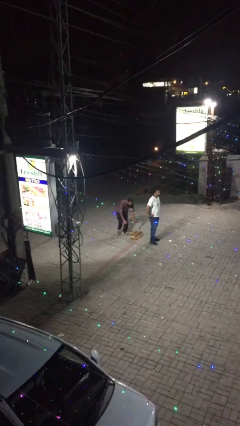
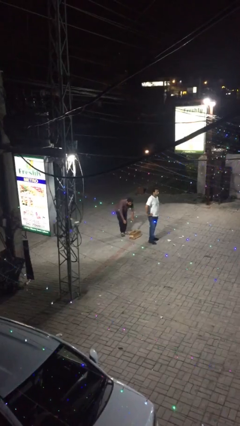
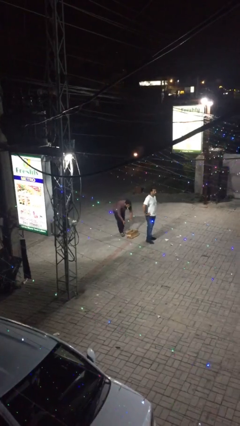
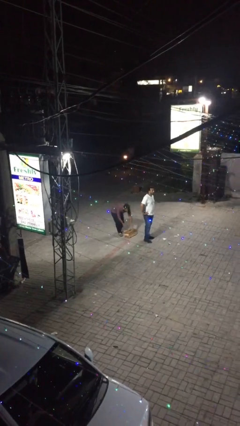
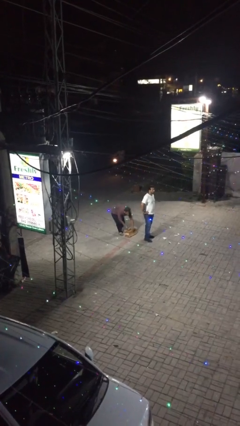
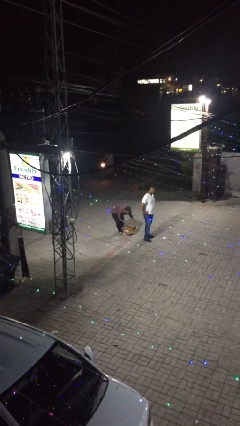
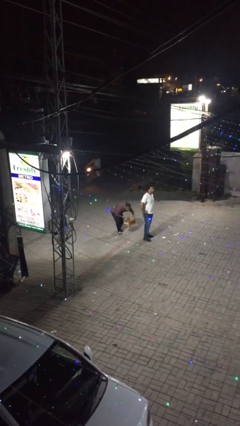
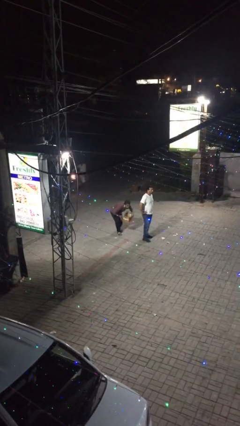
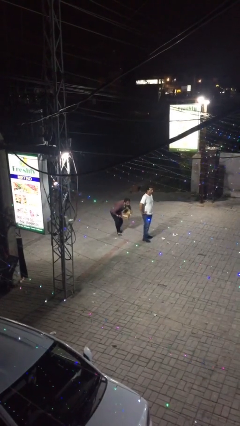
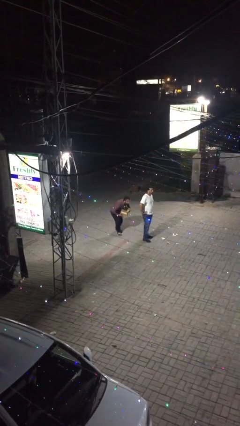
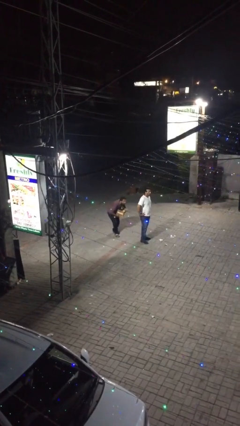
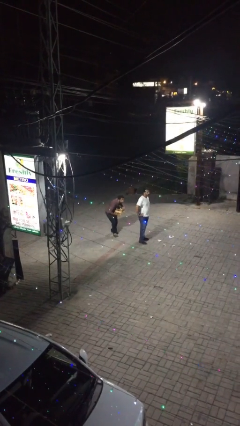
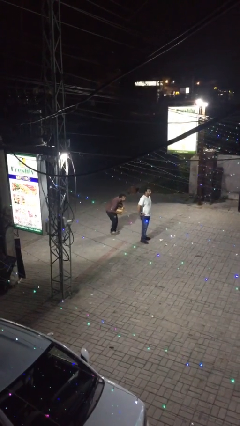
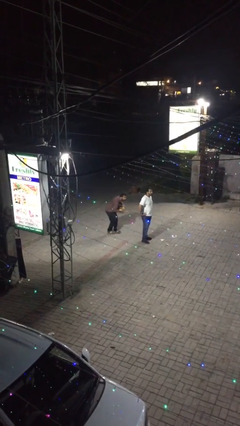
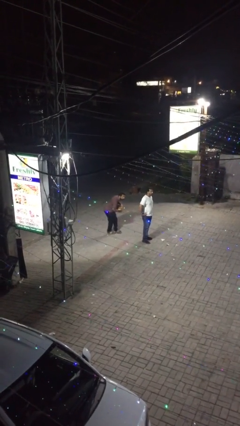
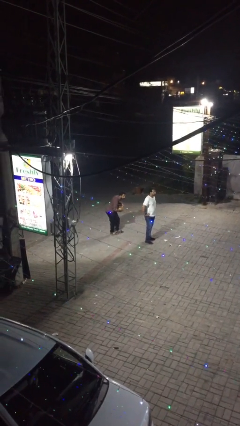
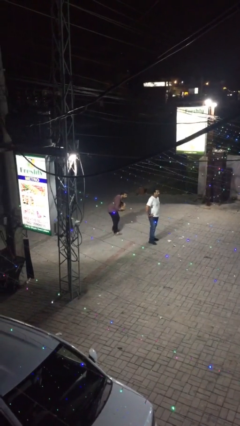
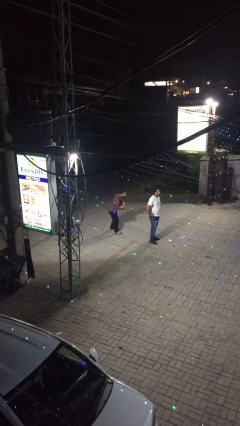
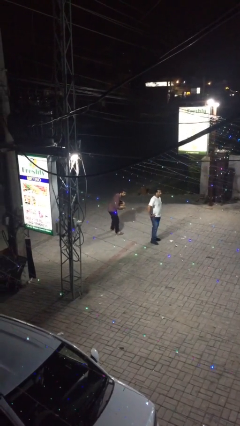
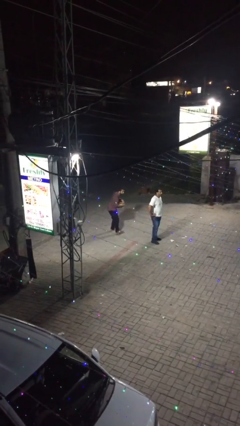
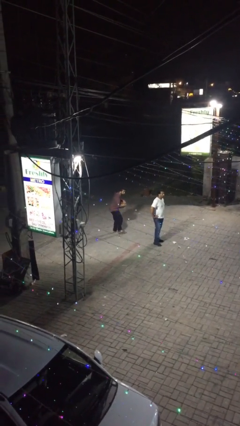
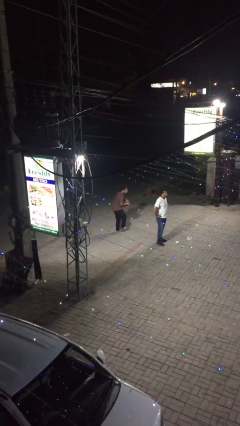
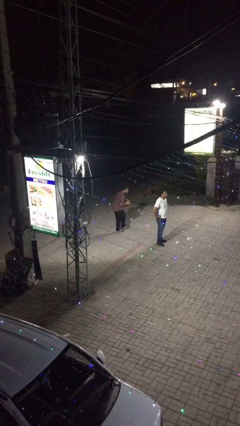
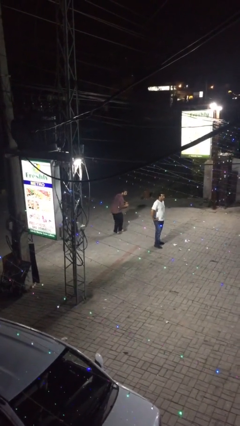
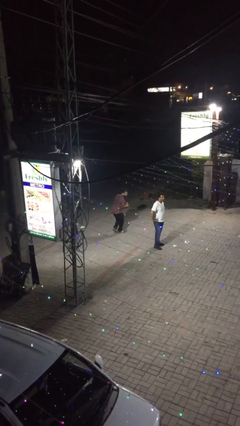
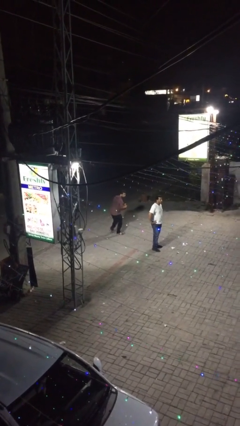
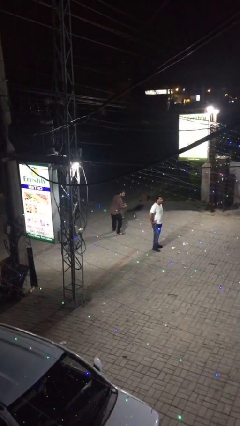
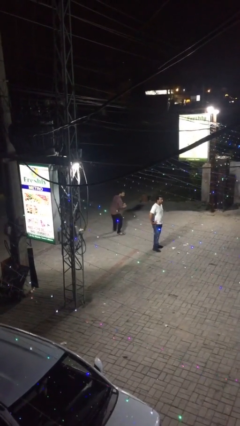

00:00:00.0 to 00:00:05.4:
person steals object from person

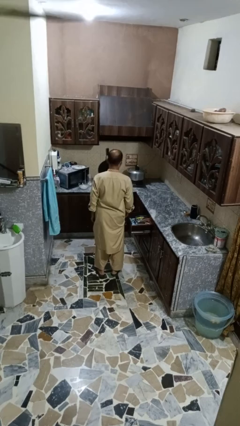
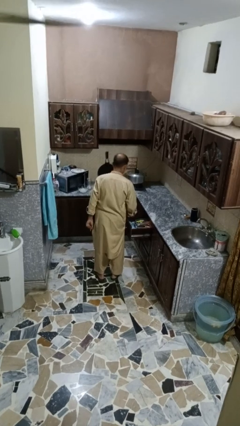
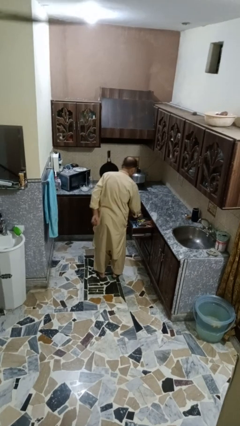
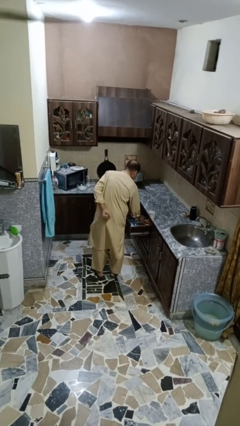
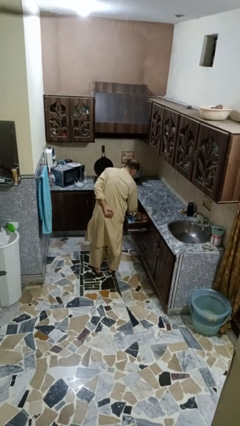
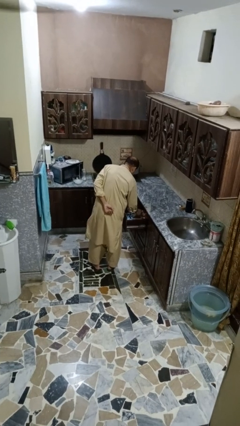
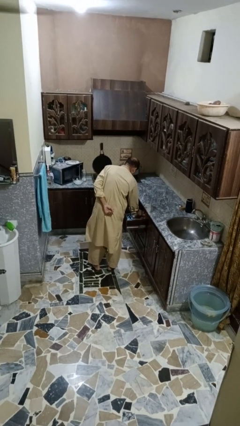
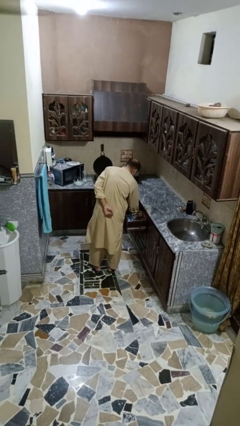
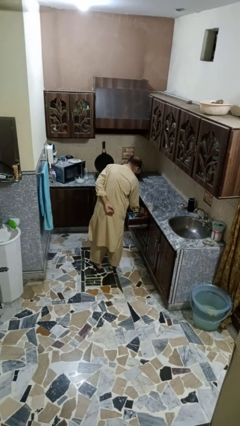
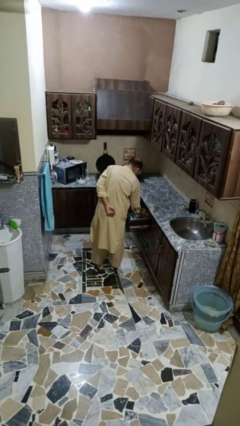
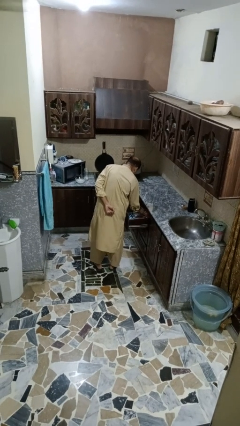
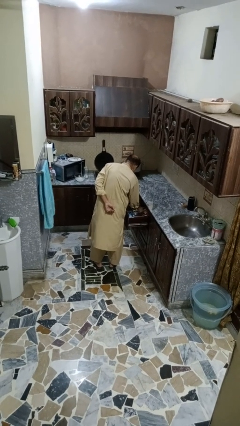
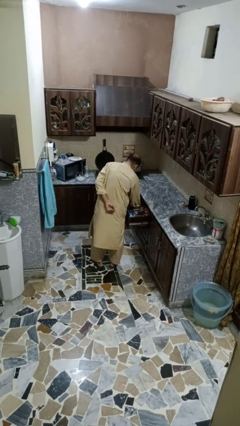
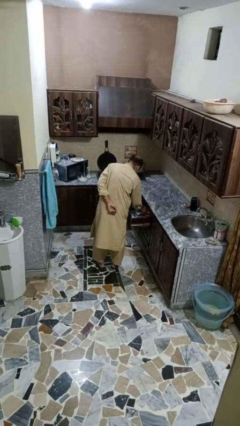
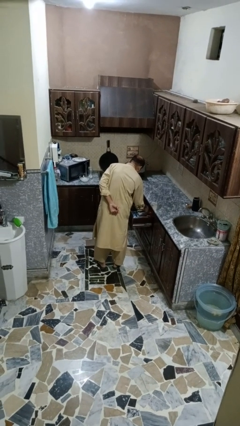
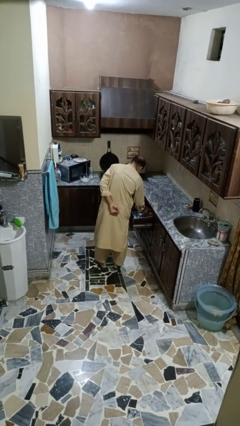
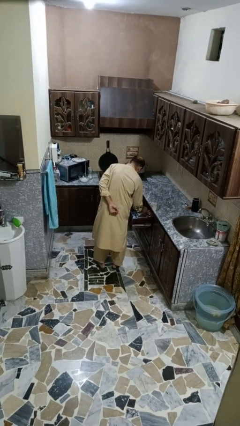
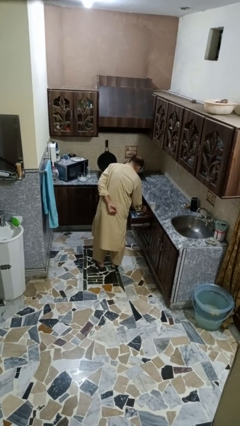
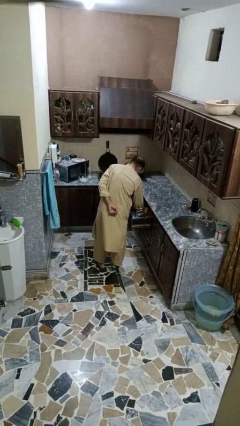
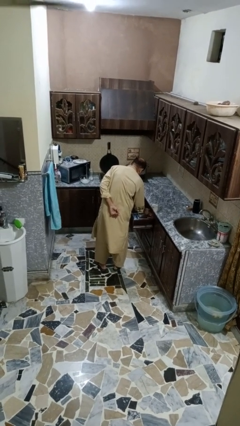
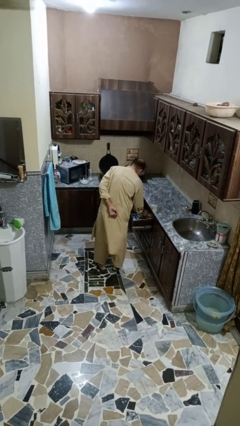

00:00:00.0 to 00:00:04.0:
person searches in kitchen drawer

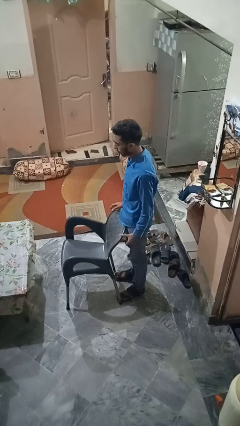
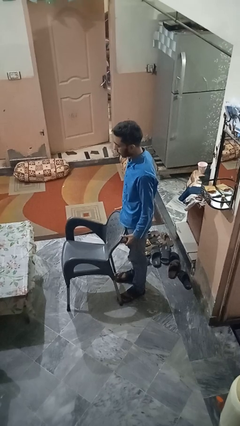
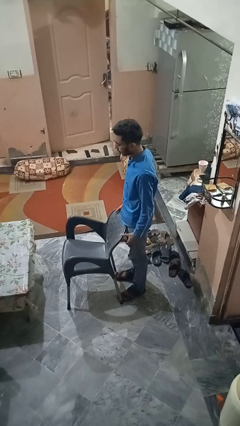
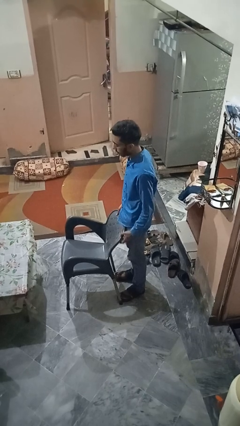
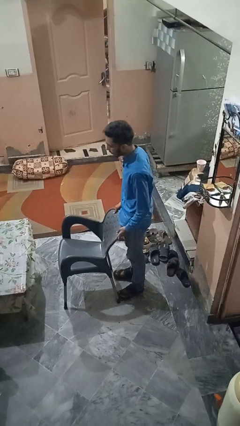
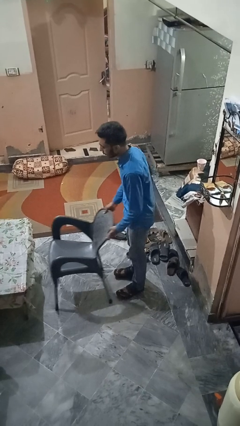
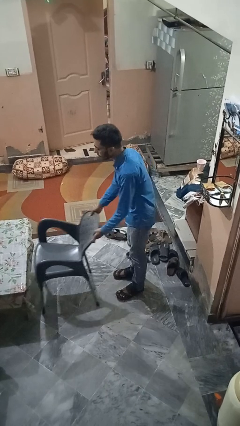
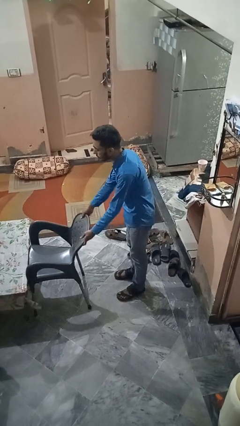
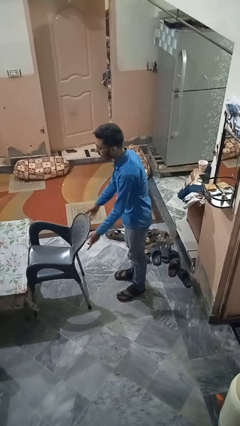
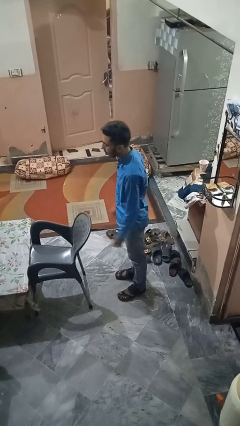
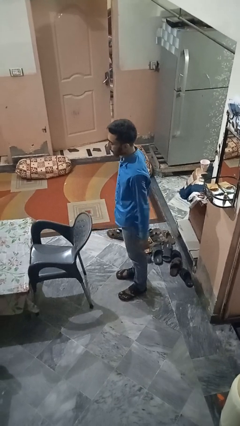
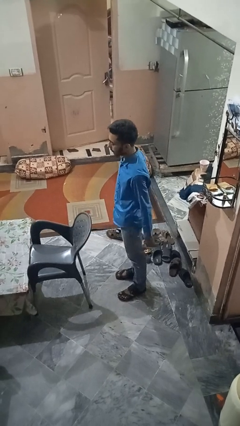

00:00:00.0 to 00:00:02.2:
person pushes in chair

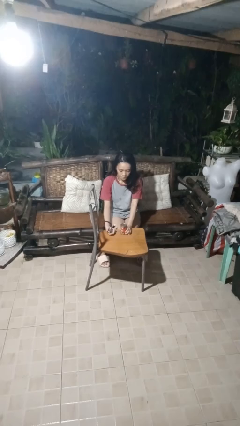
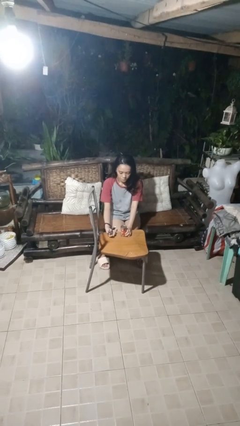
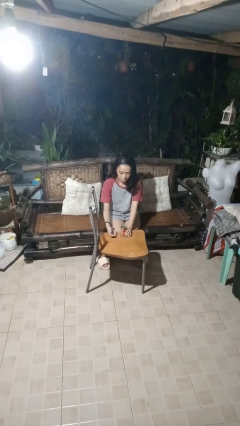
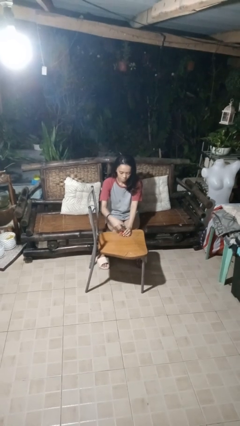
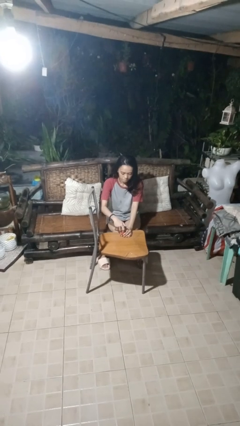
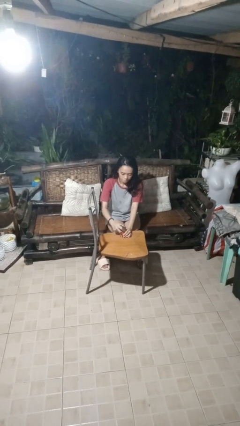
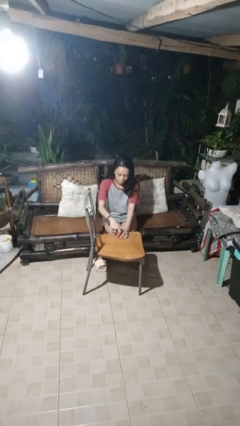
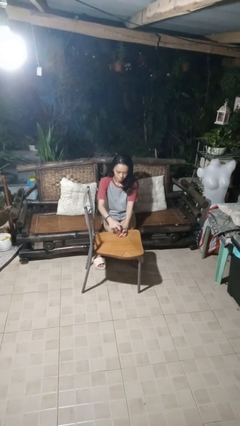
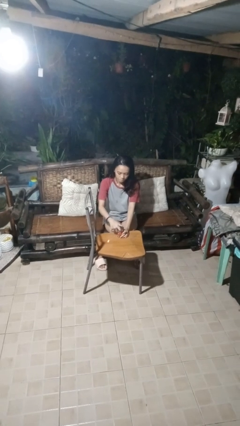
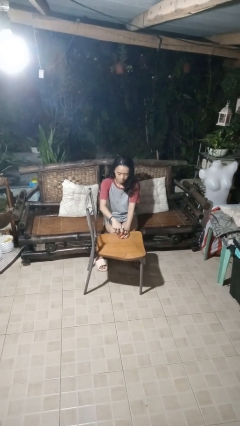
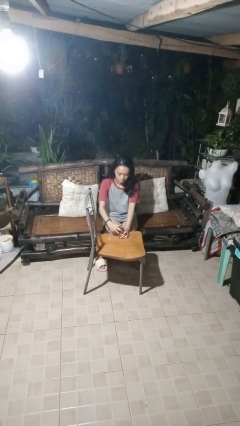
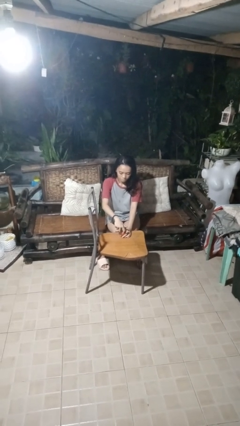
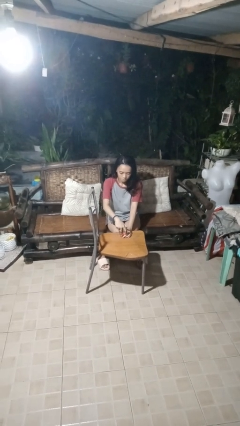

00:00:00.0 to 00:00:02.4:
person opens can with can opener

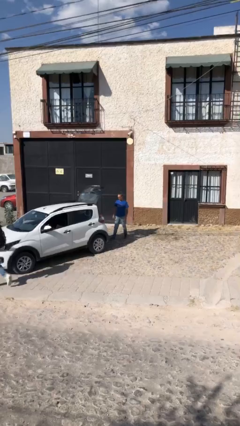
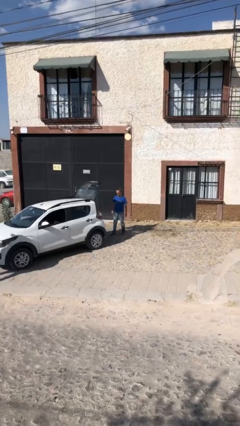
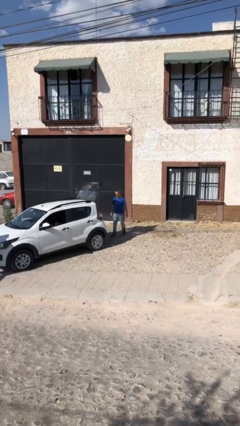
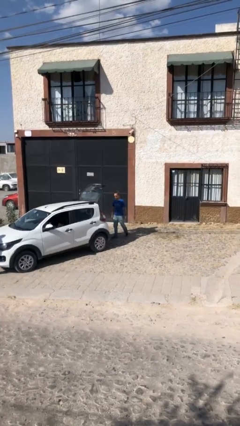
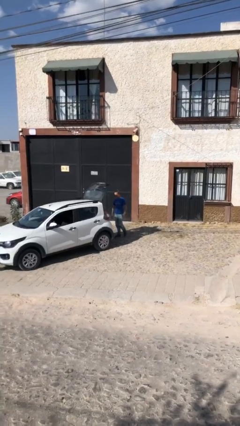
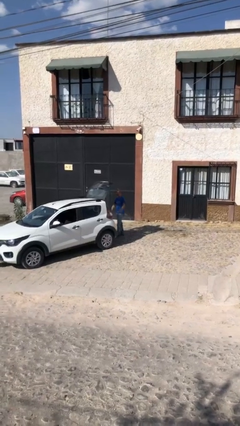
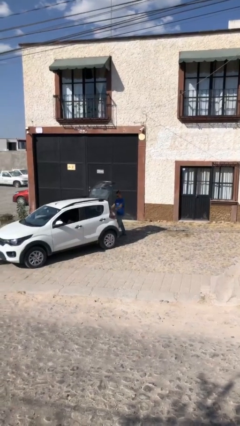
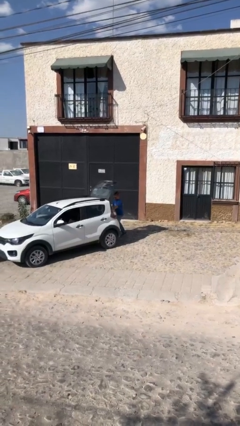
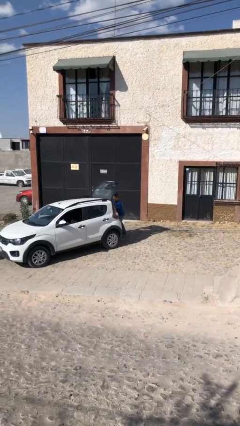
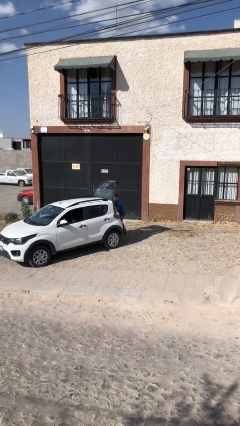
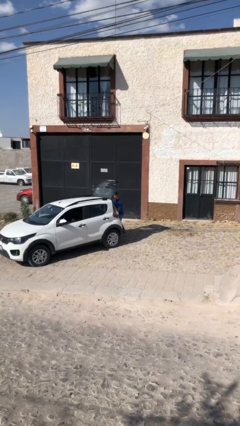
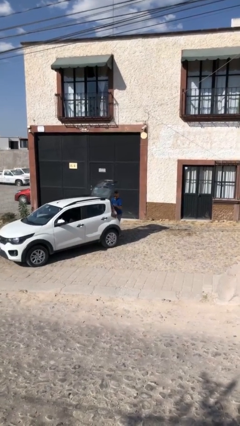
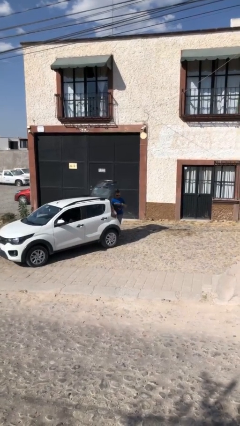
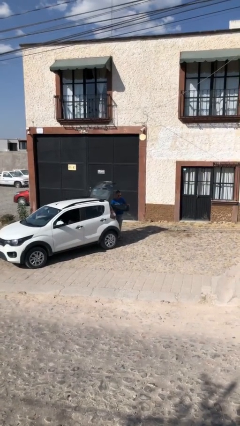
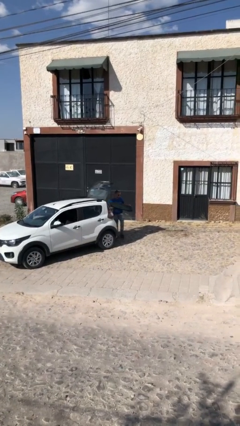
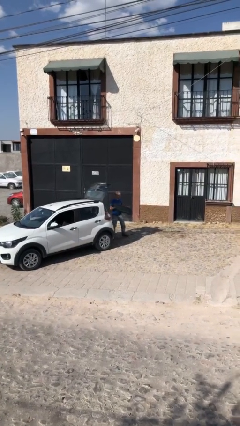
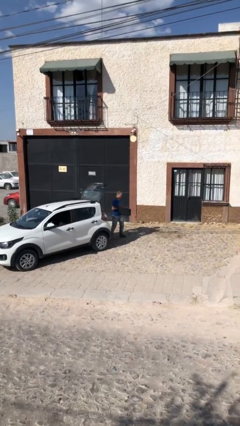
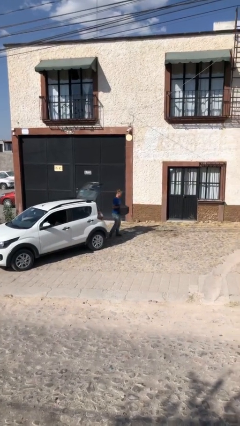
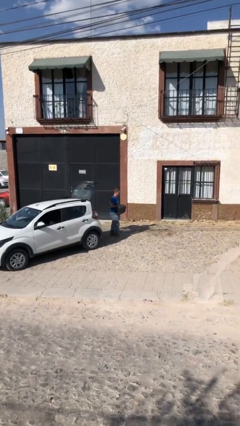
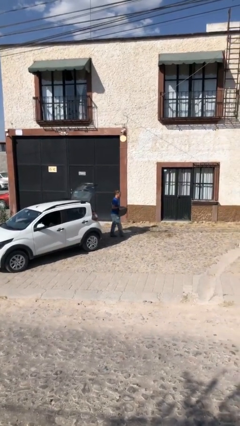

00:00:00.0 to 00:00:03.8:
person unloads car
